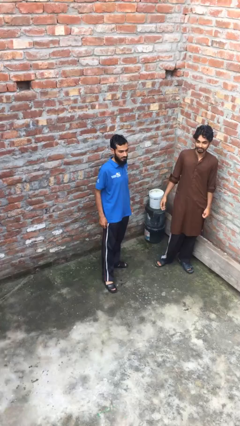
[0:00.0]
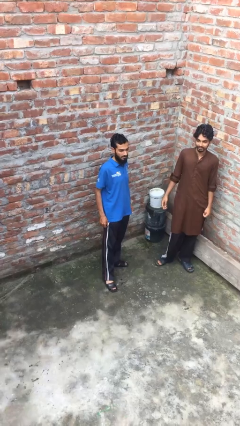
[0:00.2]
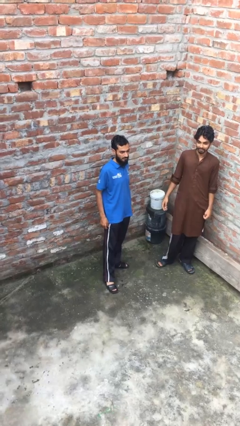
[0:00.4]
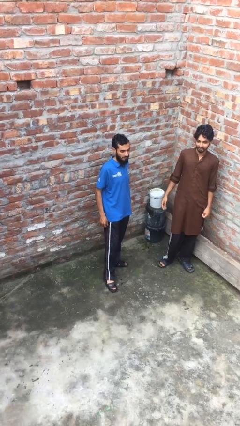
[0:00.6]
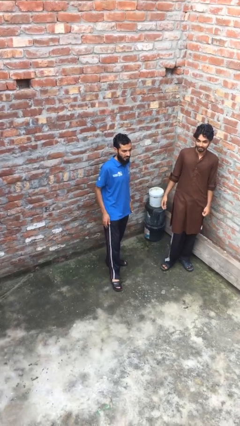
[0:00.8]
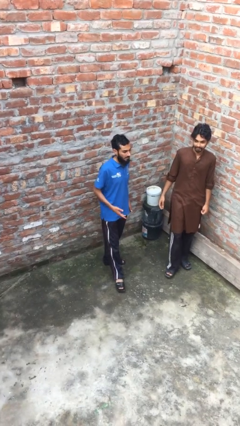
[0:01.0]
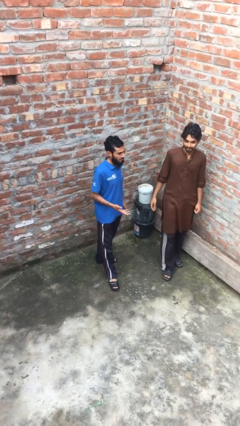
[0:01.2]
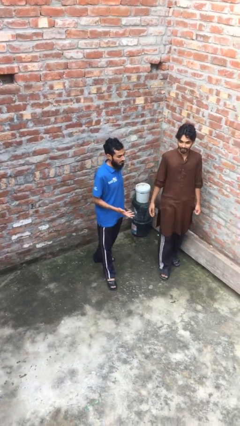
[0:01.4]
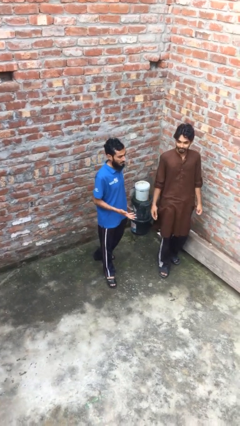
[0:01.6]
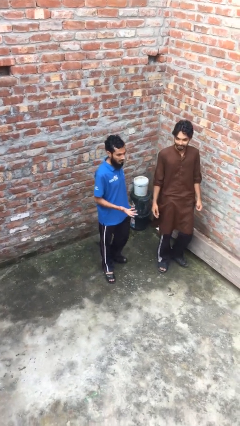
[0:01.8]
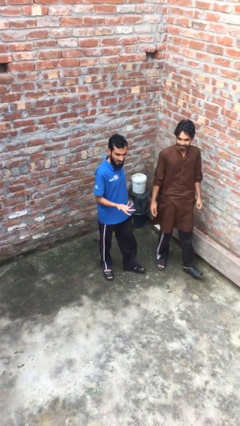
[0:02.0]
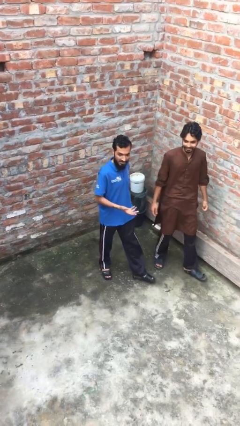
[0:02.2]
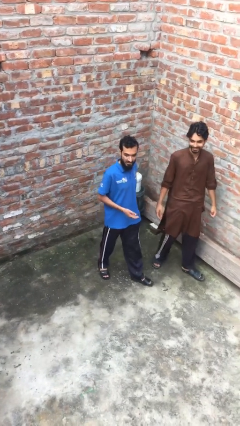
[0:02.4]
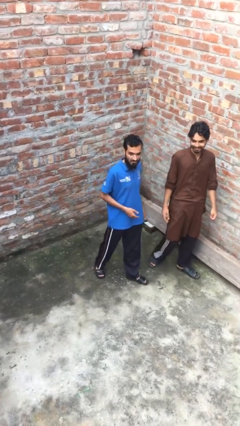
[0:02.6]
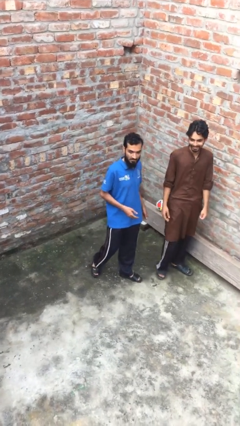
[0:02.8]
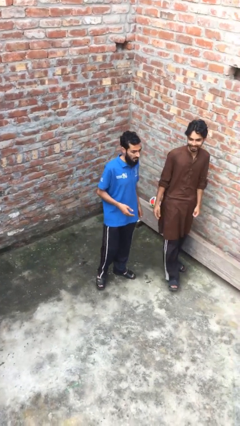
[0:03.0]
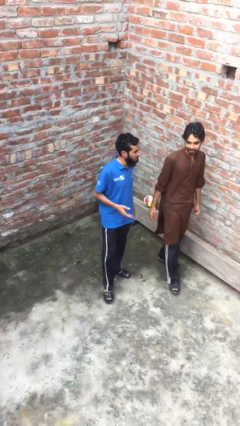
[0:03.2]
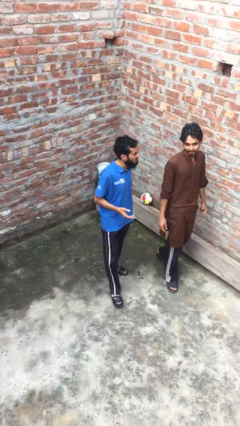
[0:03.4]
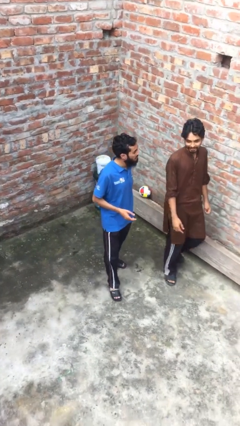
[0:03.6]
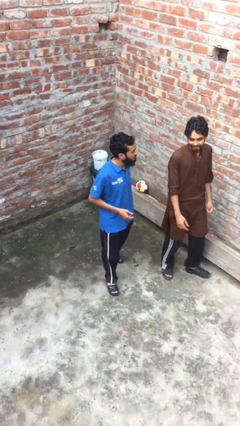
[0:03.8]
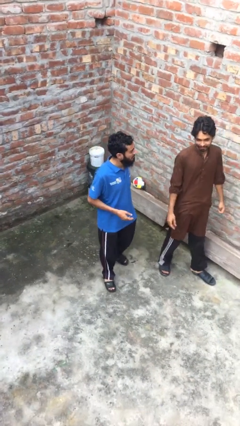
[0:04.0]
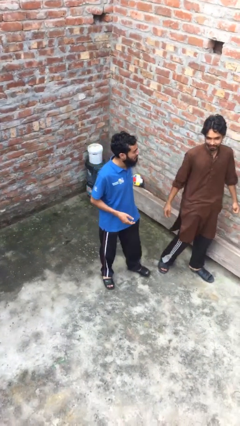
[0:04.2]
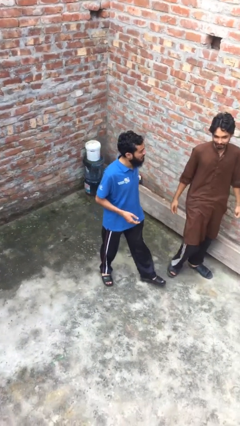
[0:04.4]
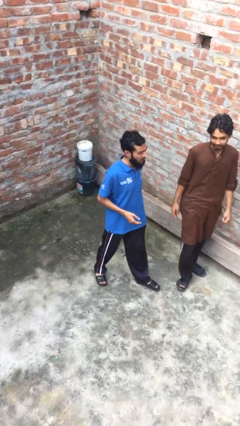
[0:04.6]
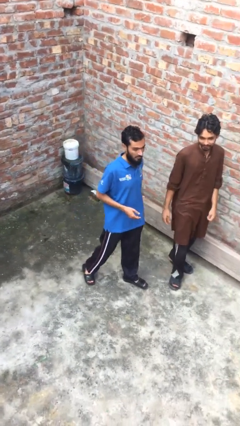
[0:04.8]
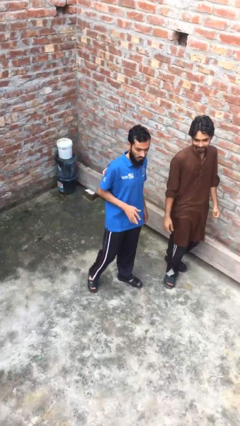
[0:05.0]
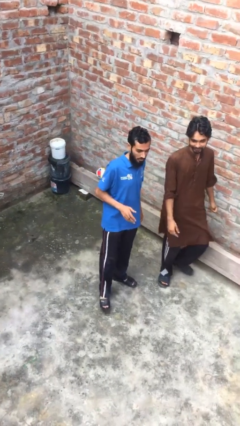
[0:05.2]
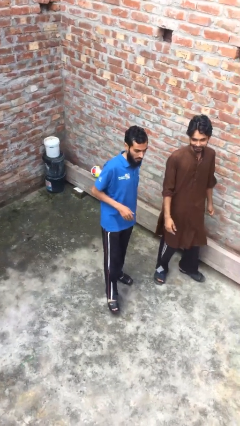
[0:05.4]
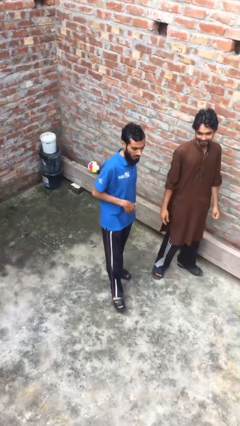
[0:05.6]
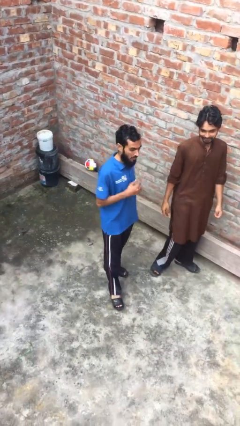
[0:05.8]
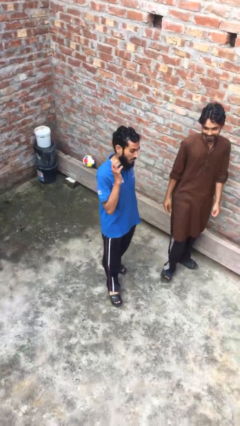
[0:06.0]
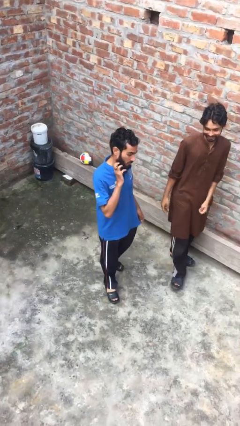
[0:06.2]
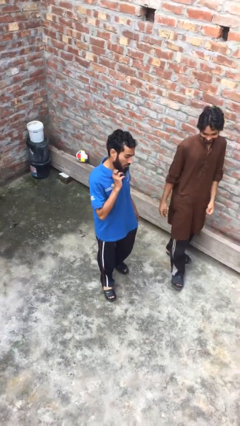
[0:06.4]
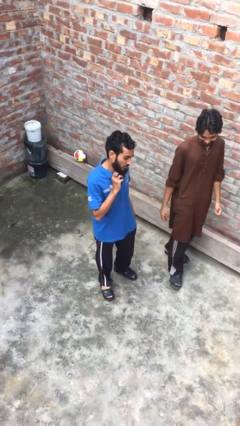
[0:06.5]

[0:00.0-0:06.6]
person talks to person

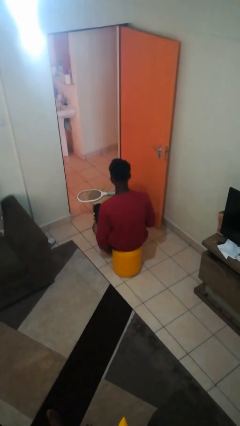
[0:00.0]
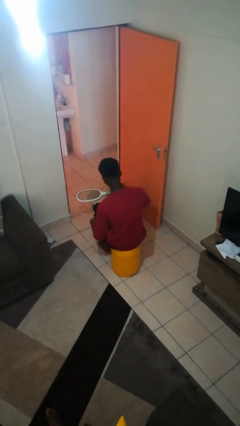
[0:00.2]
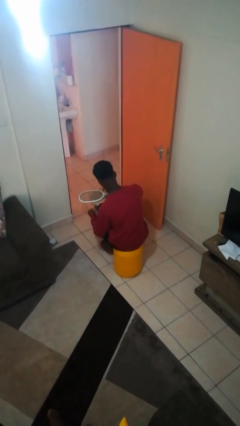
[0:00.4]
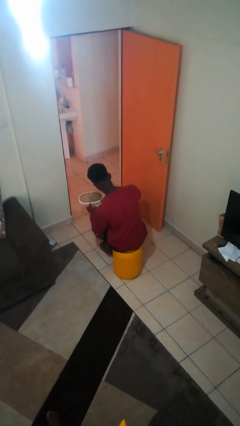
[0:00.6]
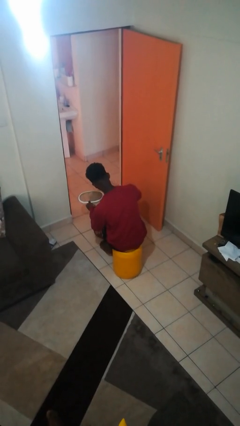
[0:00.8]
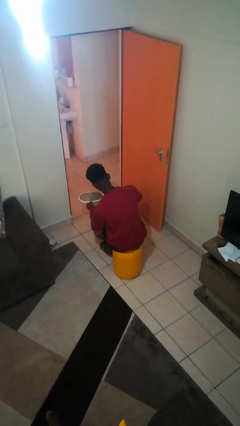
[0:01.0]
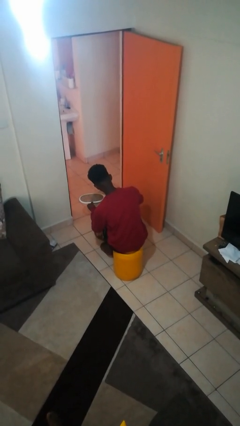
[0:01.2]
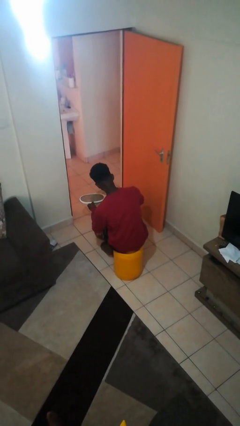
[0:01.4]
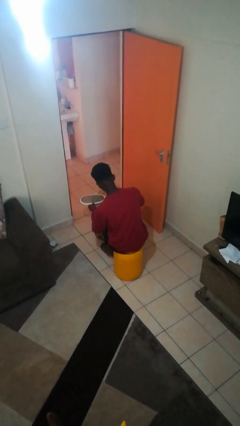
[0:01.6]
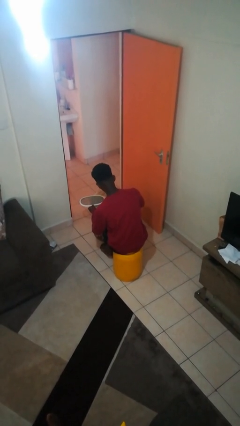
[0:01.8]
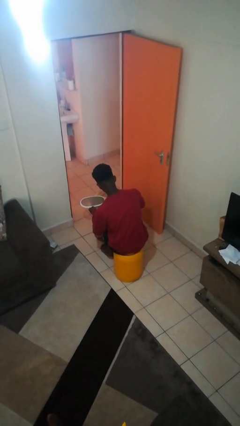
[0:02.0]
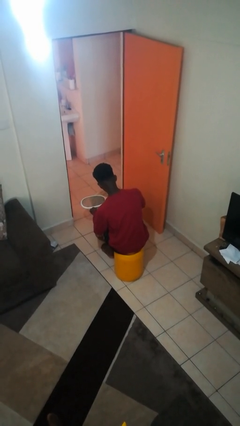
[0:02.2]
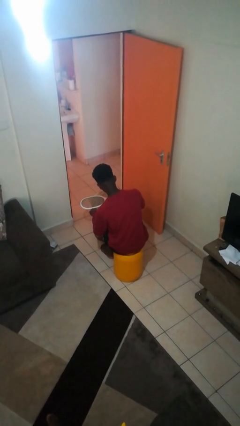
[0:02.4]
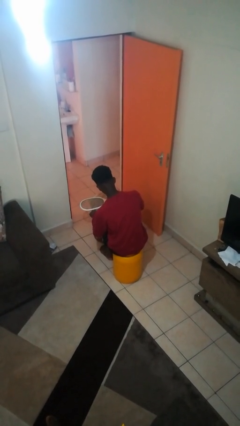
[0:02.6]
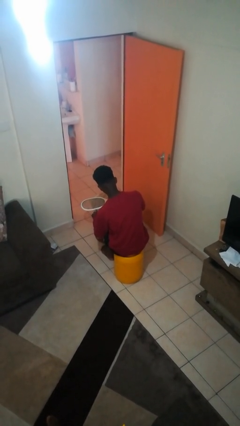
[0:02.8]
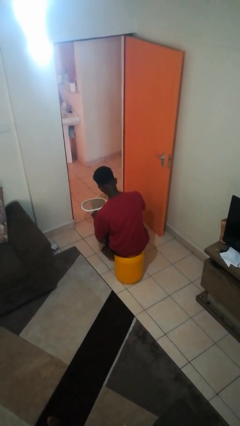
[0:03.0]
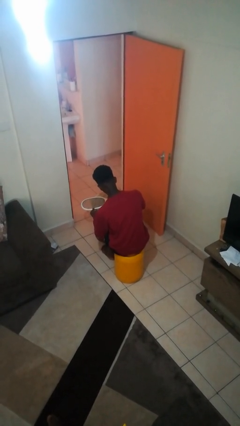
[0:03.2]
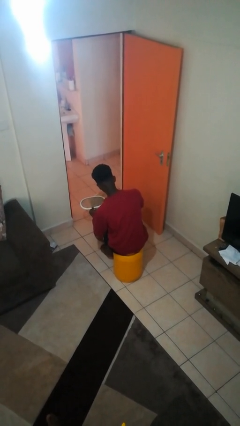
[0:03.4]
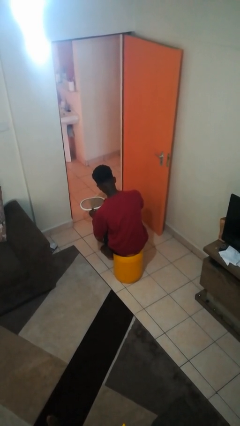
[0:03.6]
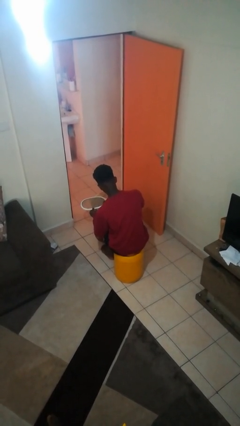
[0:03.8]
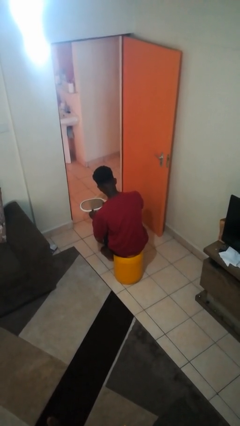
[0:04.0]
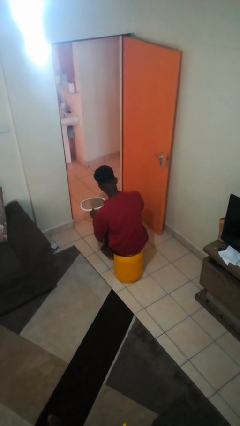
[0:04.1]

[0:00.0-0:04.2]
person taps object with finger

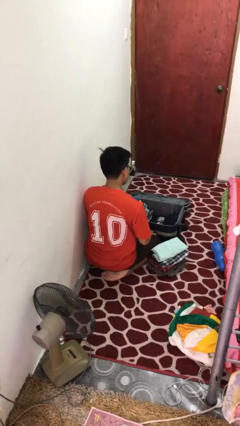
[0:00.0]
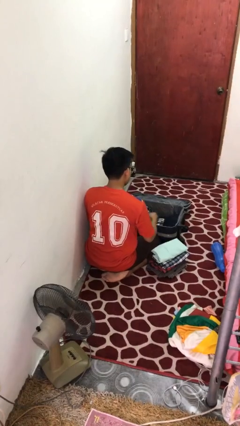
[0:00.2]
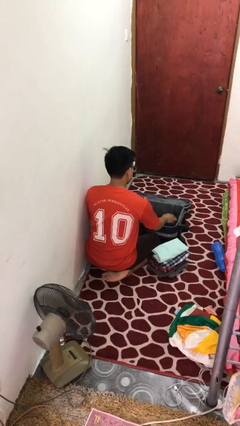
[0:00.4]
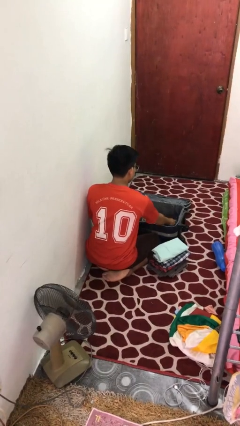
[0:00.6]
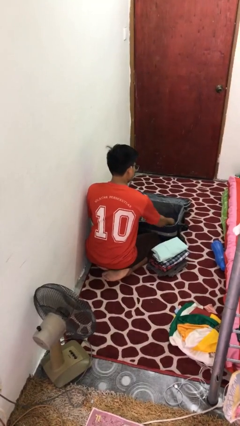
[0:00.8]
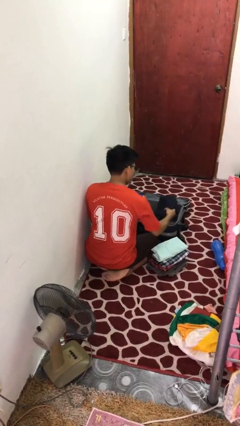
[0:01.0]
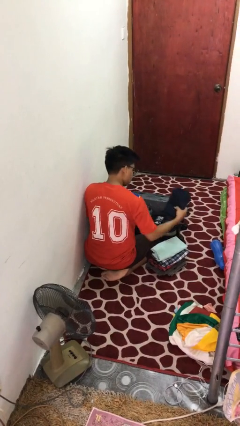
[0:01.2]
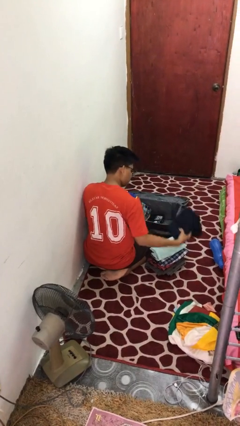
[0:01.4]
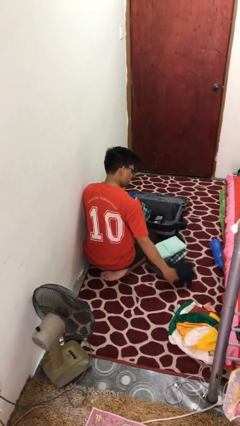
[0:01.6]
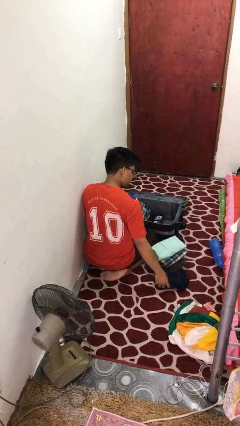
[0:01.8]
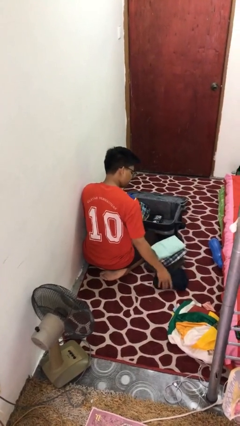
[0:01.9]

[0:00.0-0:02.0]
person unloads clothes from suitcase

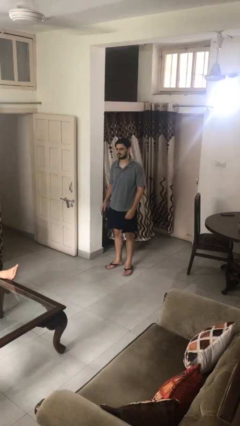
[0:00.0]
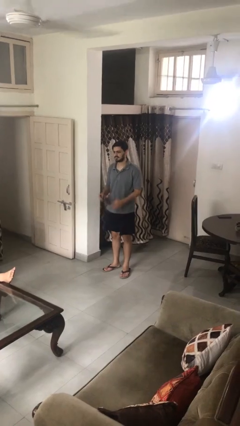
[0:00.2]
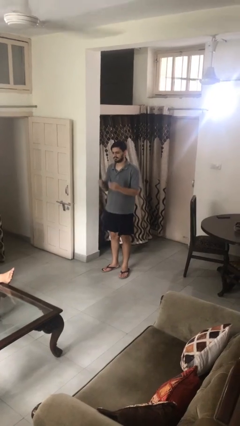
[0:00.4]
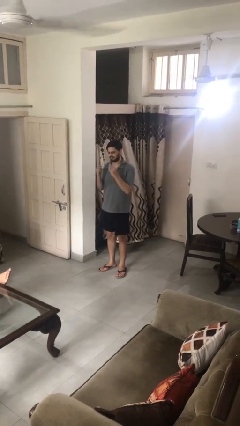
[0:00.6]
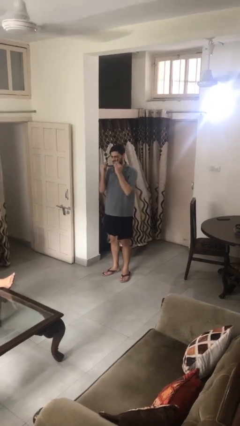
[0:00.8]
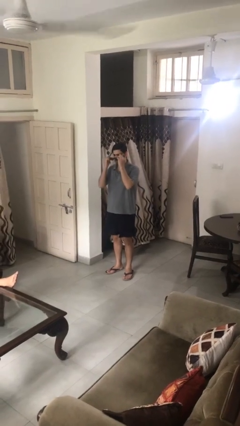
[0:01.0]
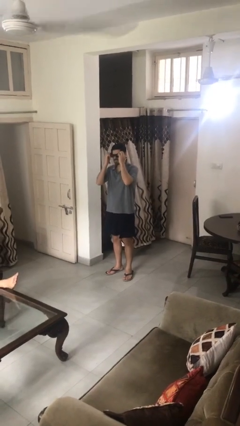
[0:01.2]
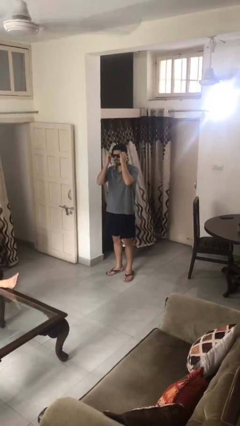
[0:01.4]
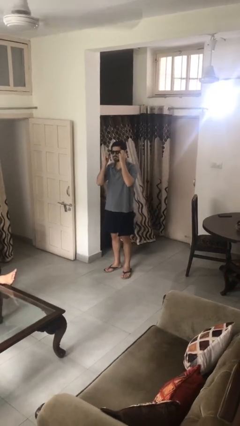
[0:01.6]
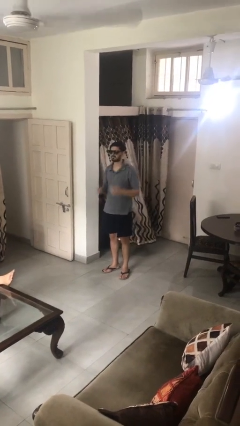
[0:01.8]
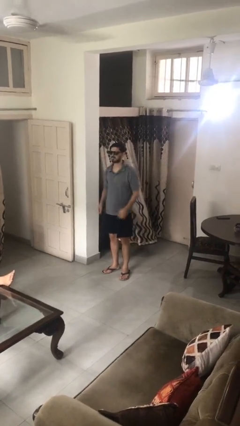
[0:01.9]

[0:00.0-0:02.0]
person puts on sunglasses

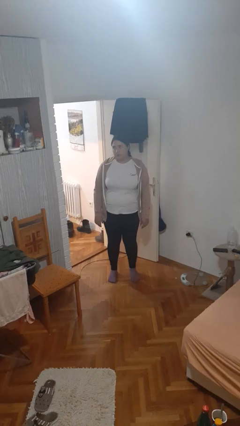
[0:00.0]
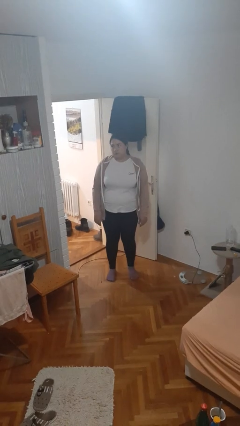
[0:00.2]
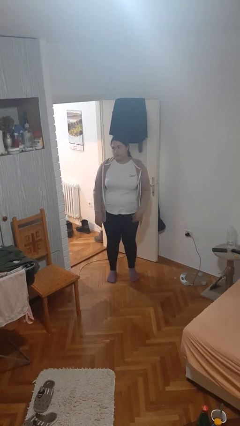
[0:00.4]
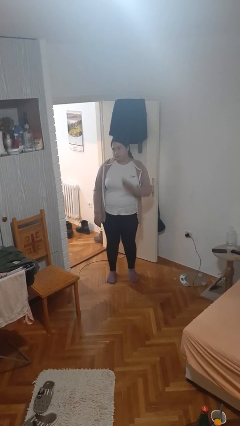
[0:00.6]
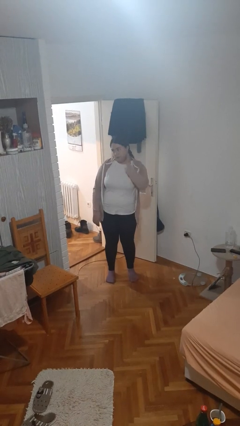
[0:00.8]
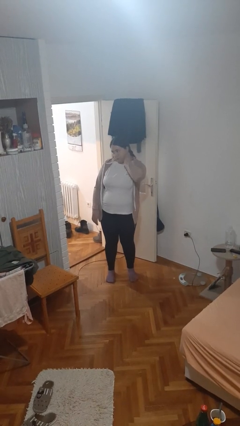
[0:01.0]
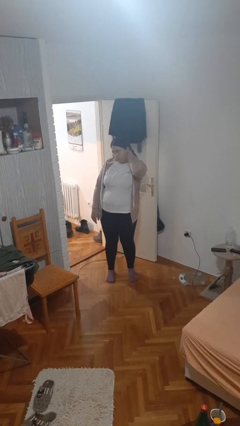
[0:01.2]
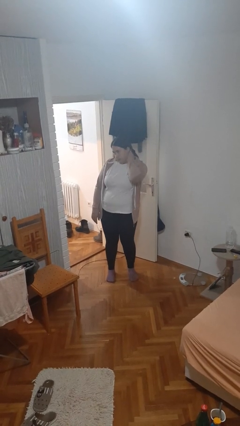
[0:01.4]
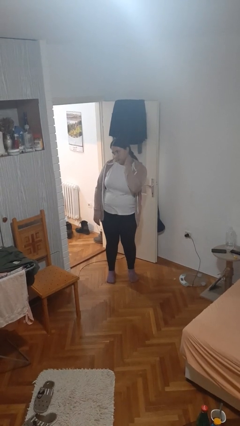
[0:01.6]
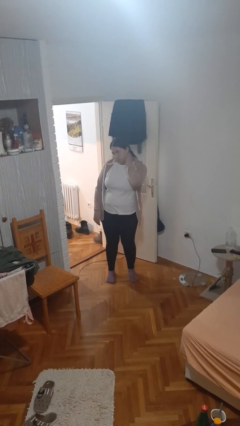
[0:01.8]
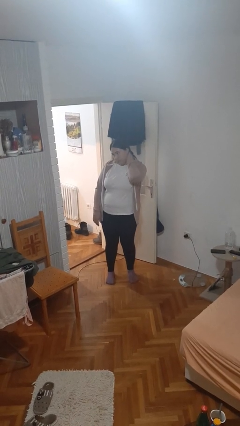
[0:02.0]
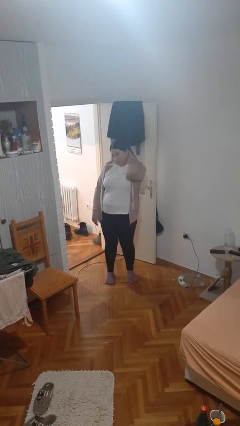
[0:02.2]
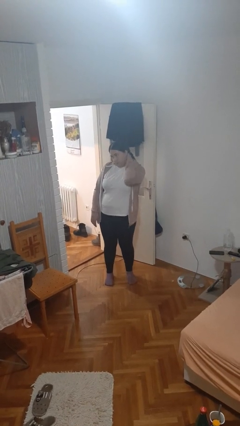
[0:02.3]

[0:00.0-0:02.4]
person rubs neck

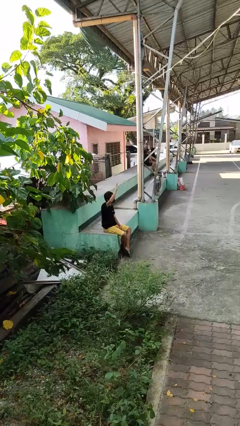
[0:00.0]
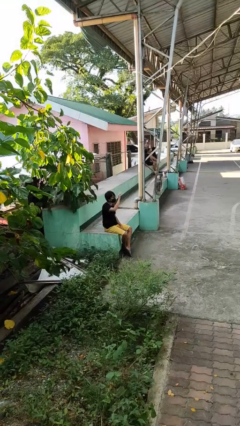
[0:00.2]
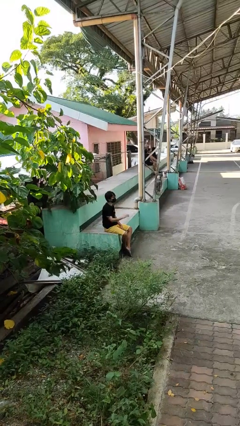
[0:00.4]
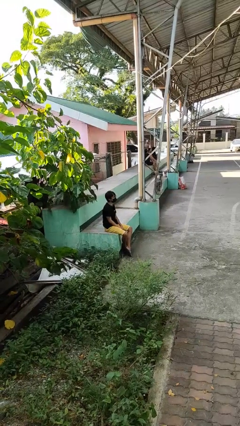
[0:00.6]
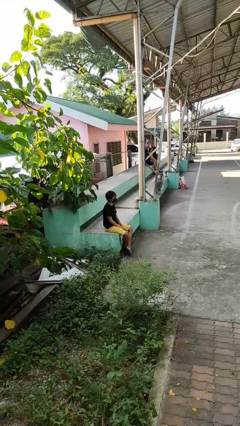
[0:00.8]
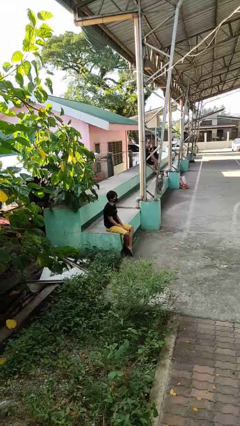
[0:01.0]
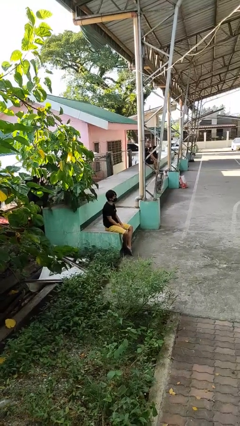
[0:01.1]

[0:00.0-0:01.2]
person gestures lower hand
